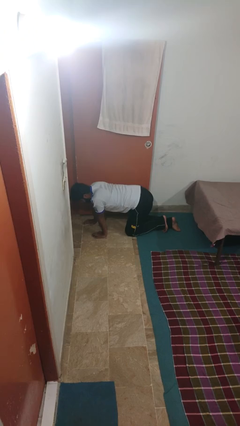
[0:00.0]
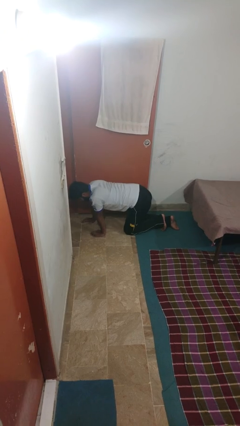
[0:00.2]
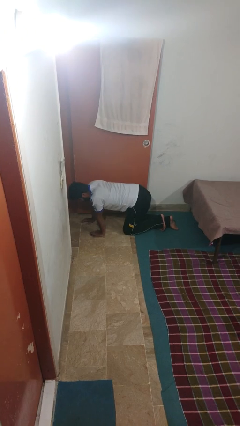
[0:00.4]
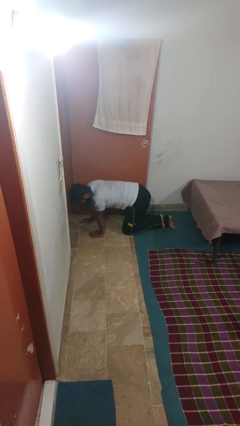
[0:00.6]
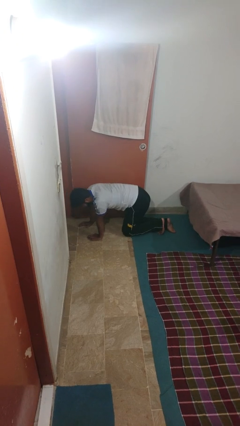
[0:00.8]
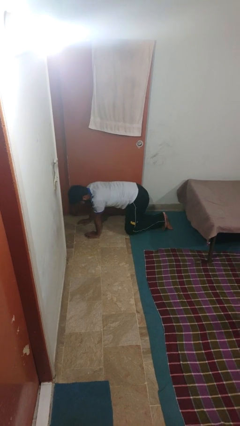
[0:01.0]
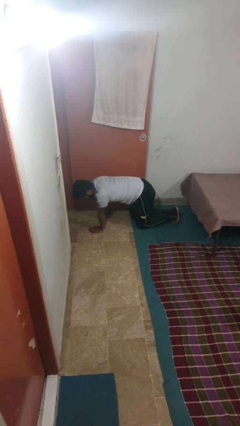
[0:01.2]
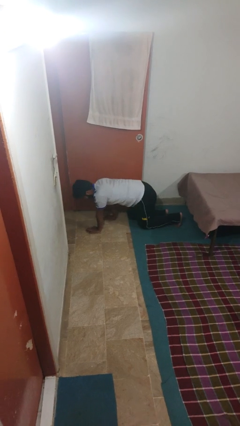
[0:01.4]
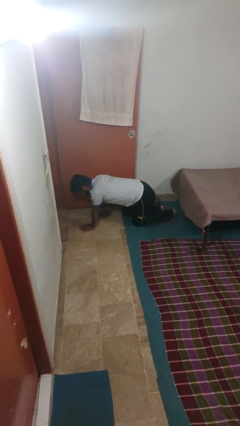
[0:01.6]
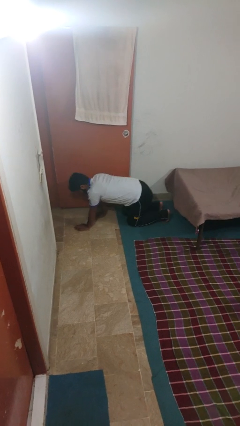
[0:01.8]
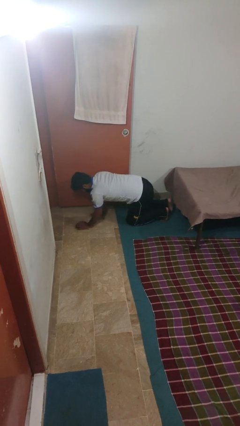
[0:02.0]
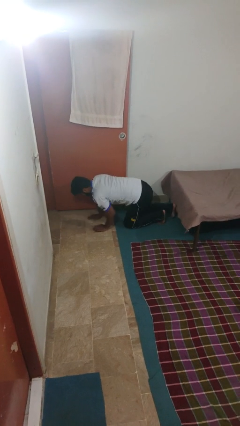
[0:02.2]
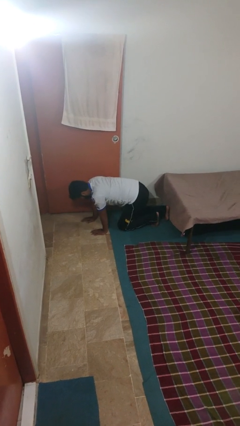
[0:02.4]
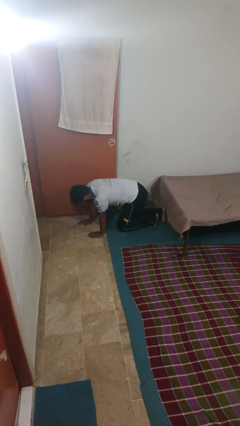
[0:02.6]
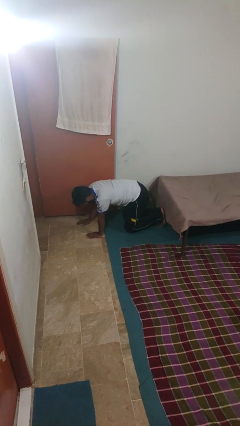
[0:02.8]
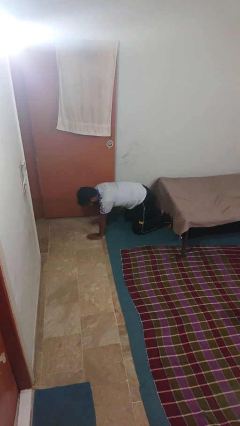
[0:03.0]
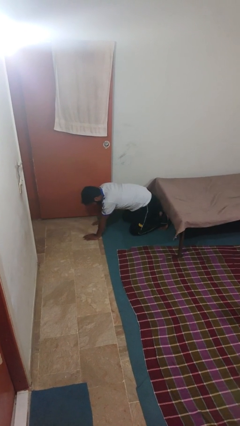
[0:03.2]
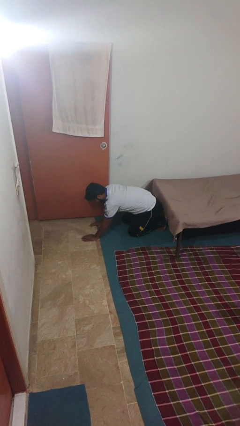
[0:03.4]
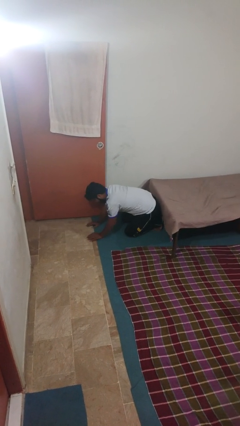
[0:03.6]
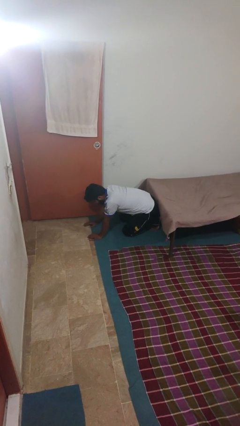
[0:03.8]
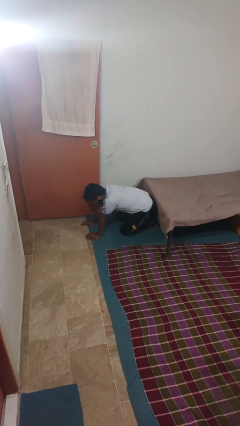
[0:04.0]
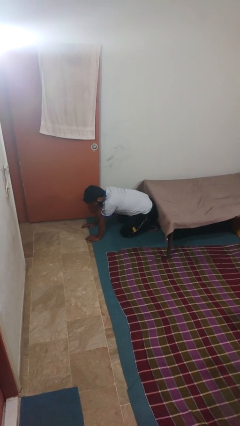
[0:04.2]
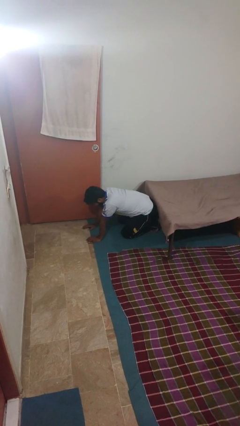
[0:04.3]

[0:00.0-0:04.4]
person crawls

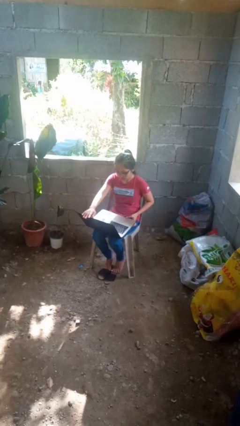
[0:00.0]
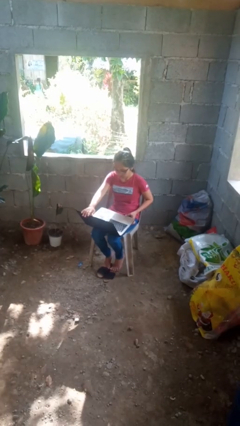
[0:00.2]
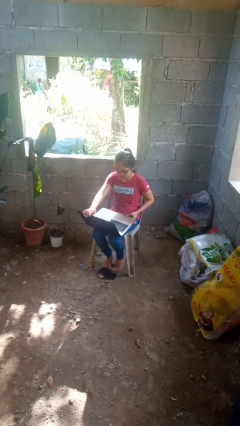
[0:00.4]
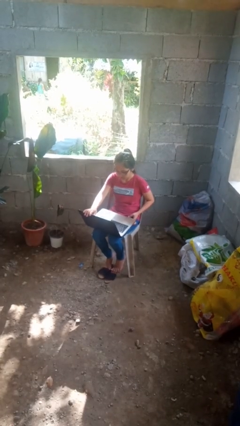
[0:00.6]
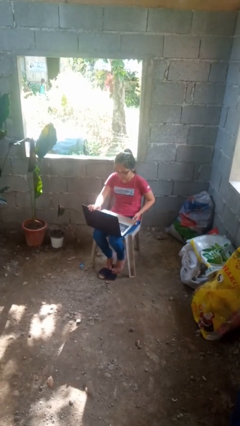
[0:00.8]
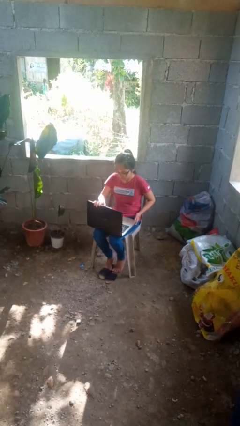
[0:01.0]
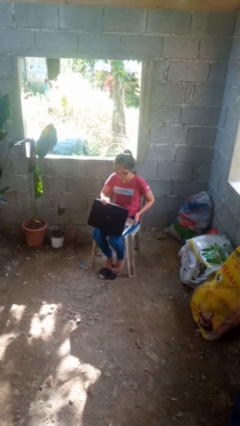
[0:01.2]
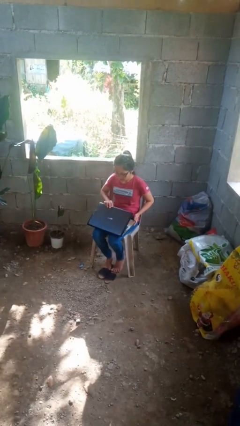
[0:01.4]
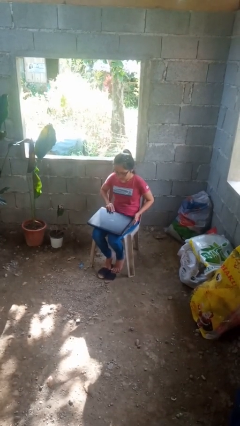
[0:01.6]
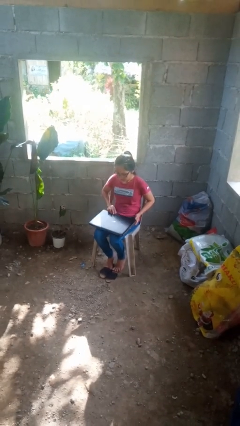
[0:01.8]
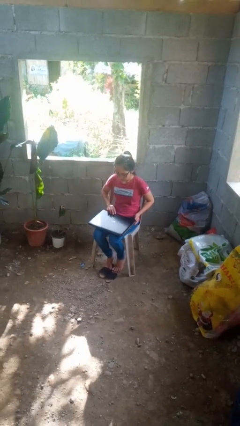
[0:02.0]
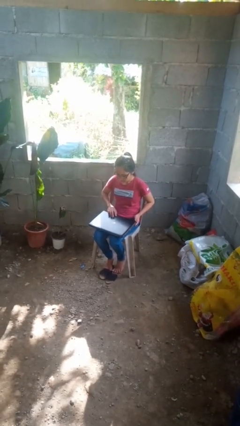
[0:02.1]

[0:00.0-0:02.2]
person closes laptop

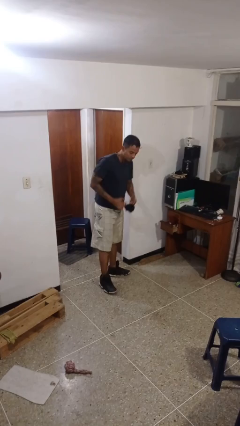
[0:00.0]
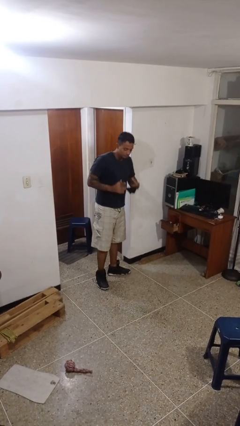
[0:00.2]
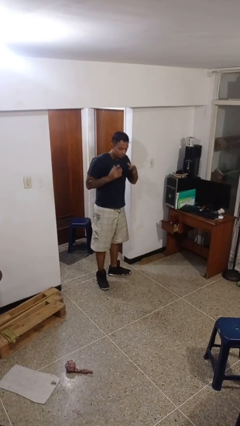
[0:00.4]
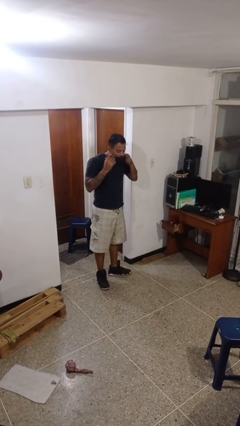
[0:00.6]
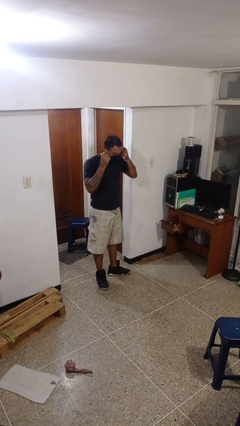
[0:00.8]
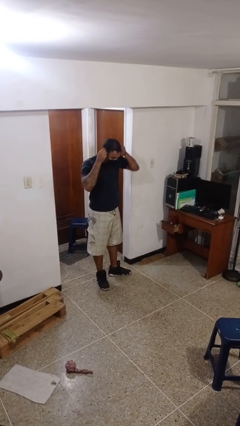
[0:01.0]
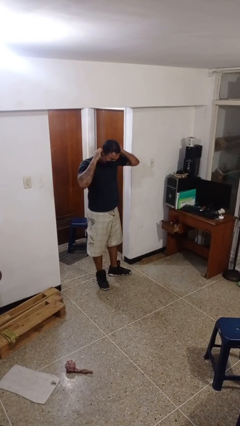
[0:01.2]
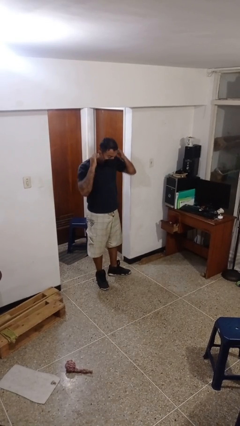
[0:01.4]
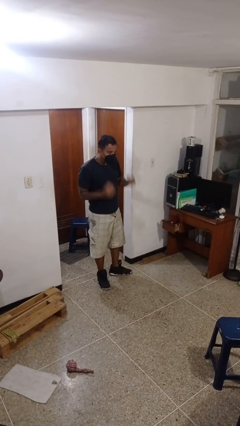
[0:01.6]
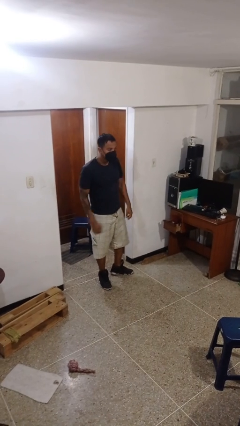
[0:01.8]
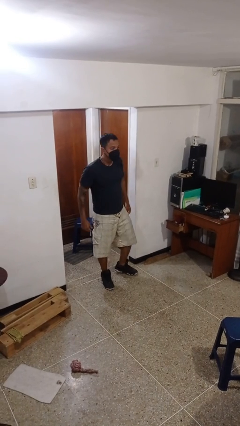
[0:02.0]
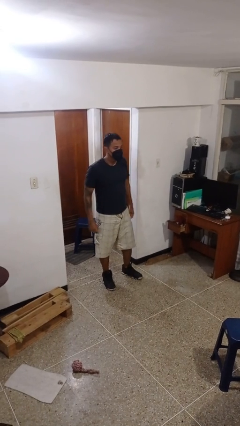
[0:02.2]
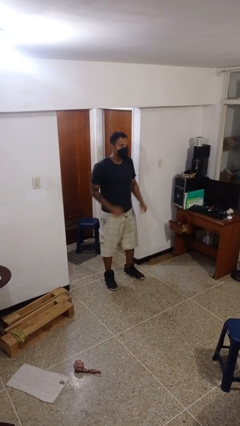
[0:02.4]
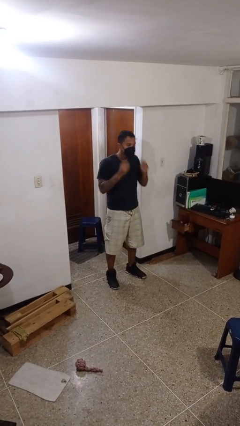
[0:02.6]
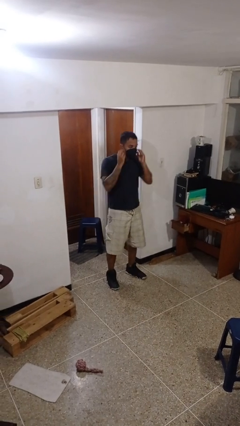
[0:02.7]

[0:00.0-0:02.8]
person puts on facemask

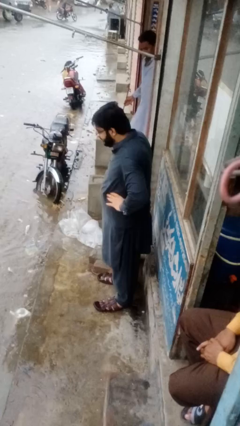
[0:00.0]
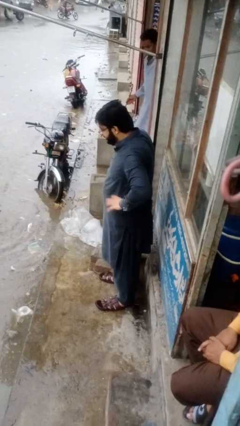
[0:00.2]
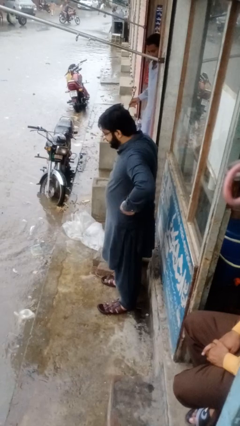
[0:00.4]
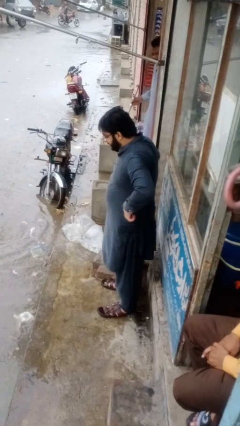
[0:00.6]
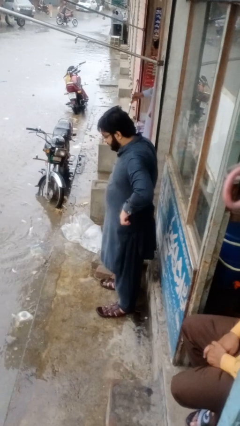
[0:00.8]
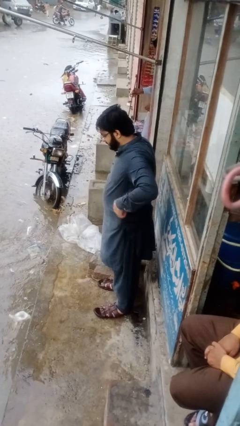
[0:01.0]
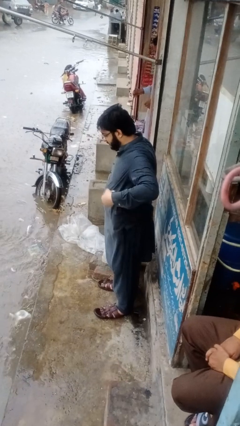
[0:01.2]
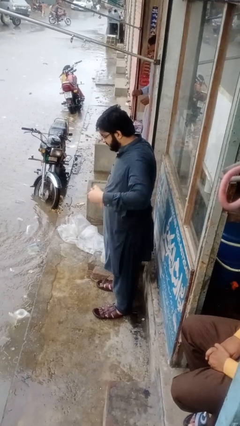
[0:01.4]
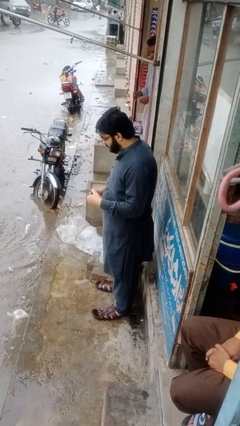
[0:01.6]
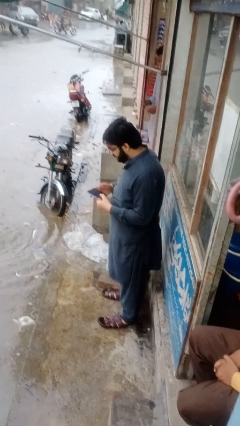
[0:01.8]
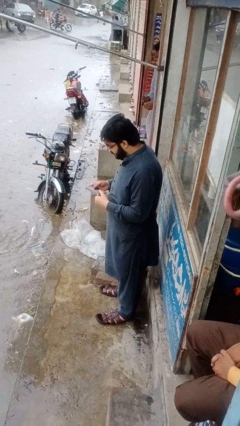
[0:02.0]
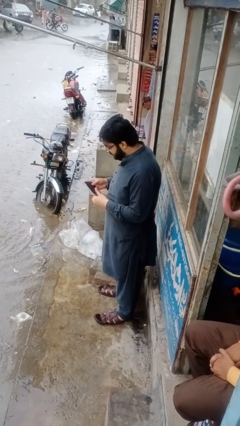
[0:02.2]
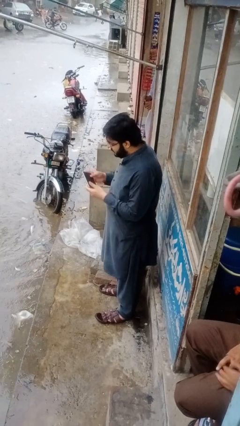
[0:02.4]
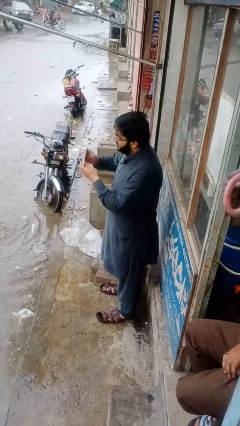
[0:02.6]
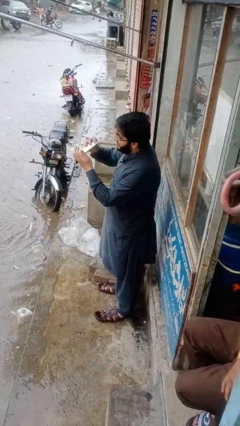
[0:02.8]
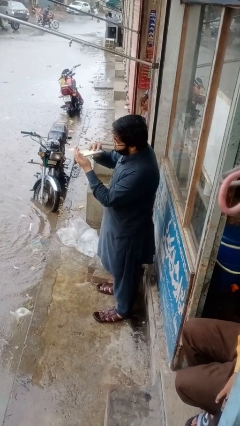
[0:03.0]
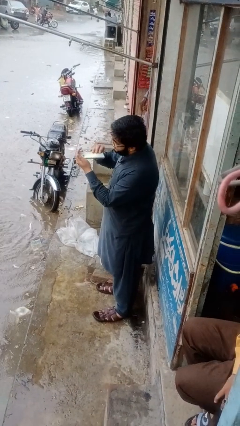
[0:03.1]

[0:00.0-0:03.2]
person takes phone from pocket

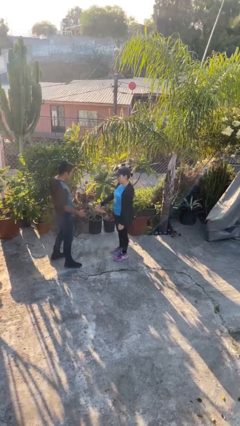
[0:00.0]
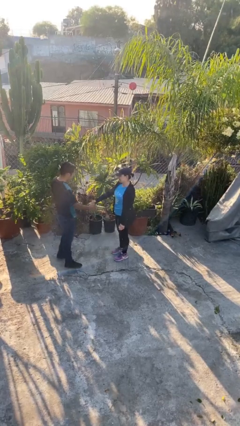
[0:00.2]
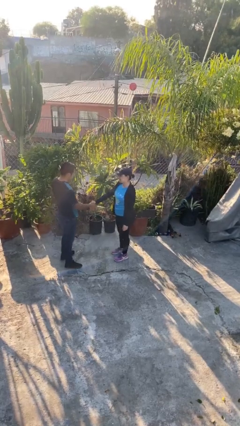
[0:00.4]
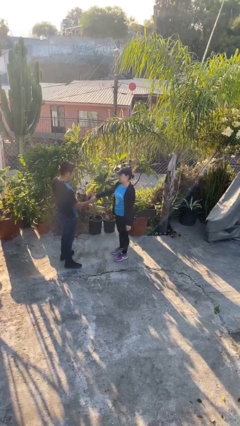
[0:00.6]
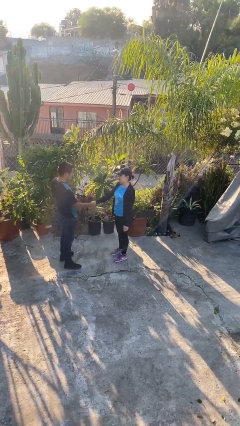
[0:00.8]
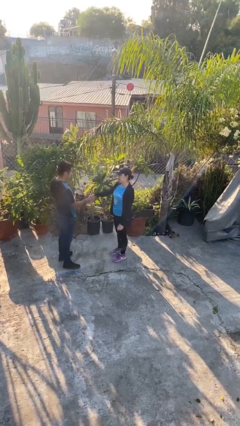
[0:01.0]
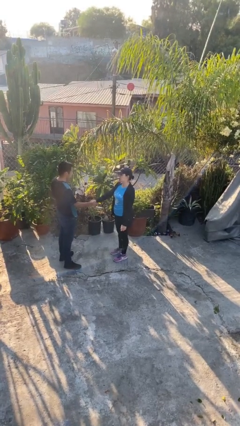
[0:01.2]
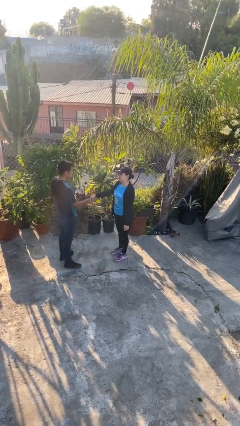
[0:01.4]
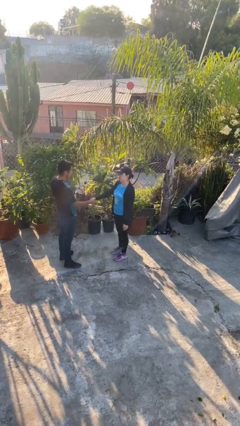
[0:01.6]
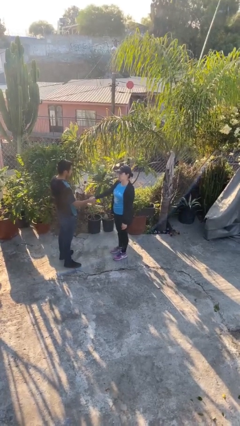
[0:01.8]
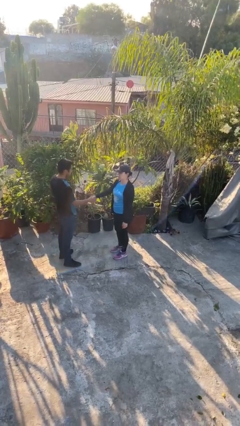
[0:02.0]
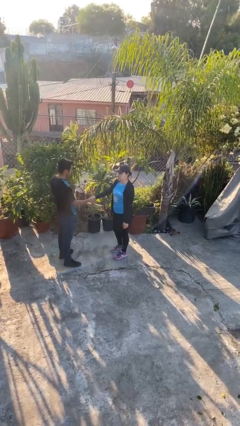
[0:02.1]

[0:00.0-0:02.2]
person shakes hand

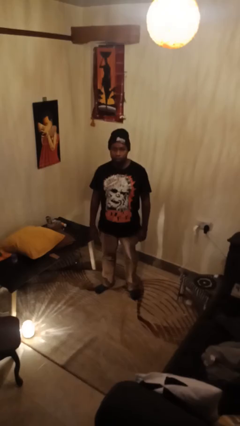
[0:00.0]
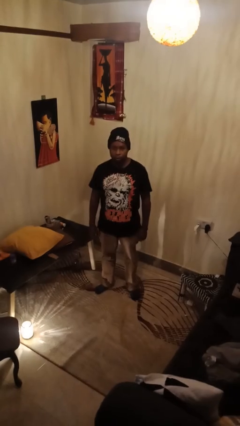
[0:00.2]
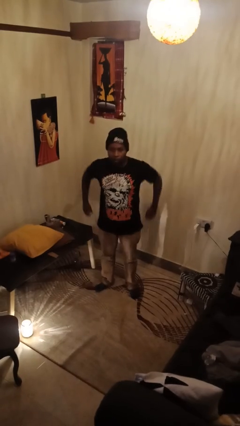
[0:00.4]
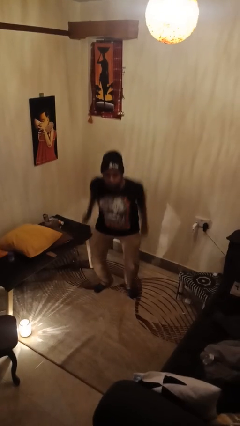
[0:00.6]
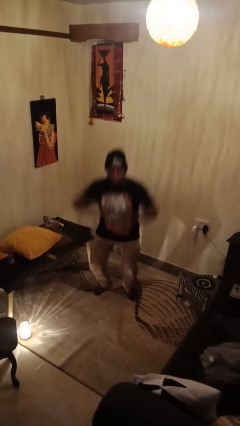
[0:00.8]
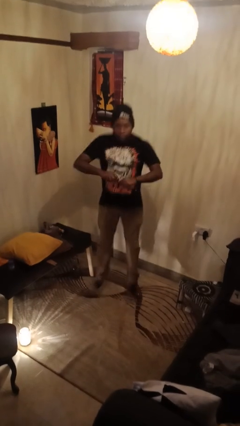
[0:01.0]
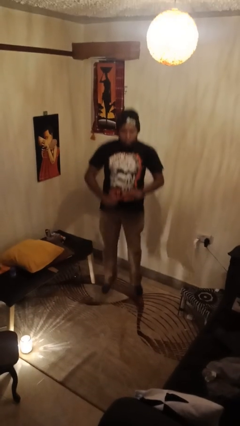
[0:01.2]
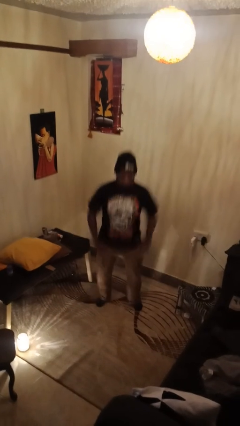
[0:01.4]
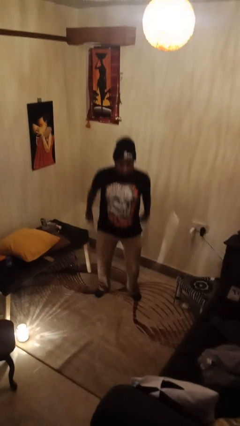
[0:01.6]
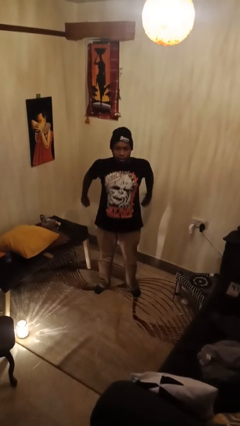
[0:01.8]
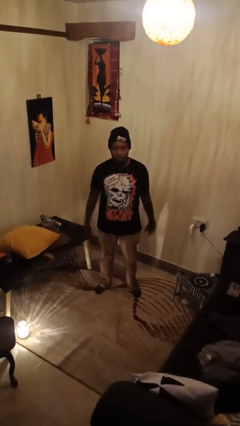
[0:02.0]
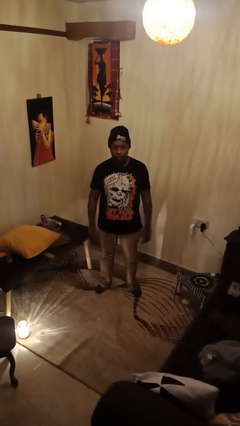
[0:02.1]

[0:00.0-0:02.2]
person jumps

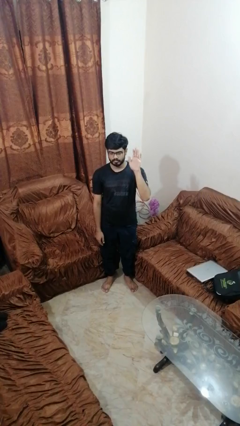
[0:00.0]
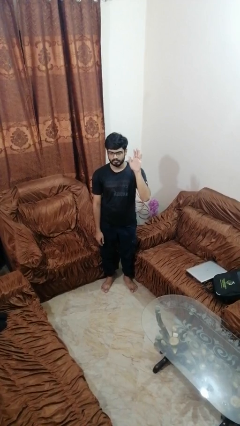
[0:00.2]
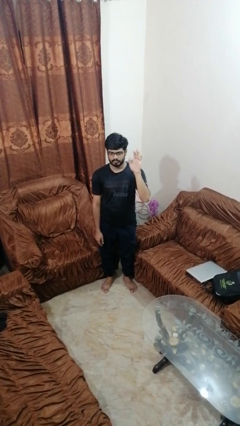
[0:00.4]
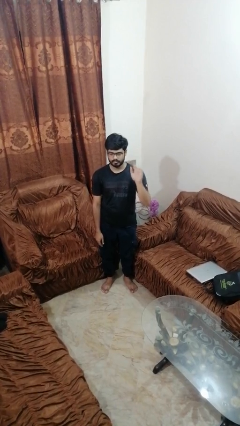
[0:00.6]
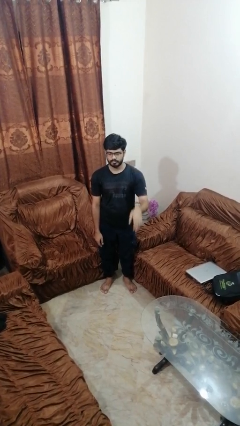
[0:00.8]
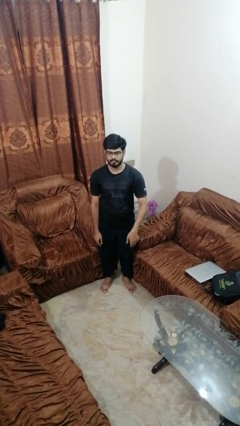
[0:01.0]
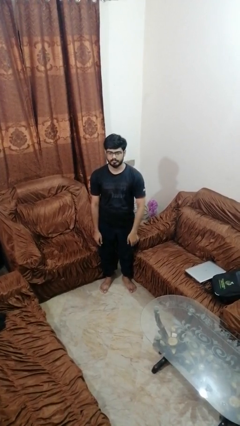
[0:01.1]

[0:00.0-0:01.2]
person gestures lower hand
